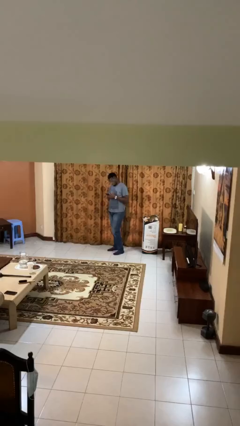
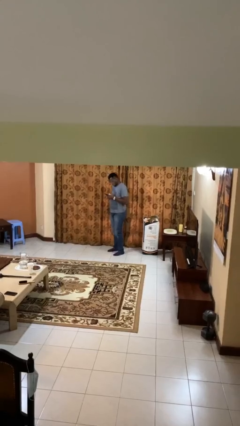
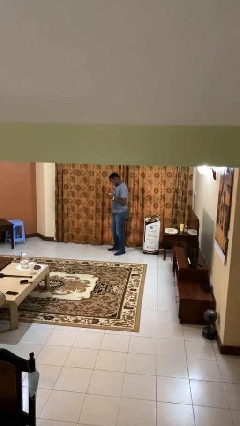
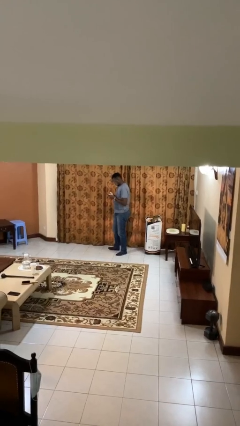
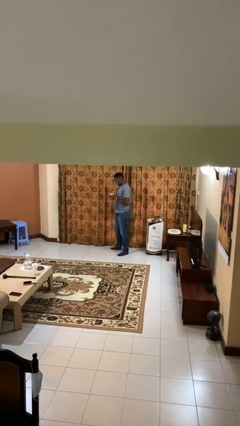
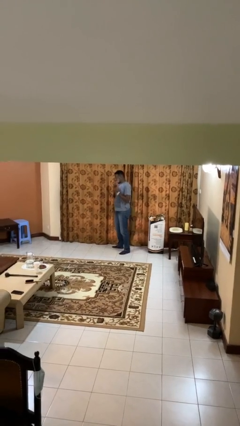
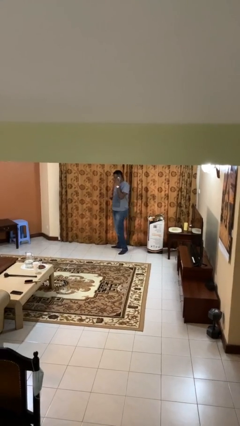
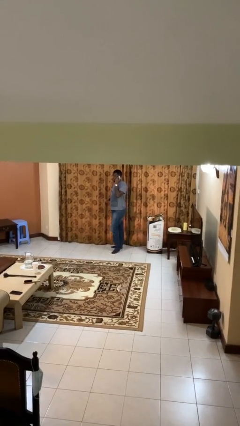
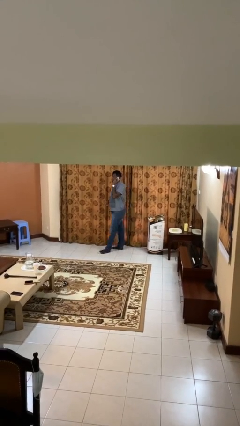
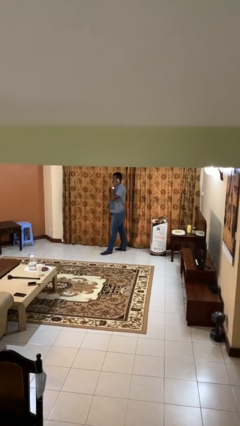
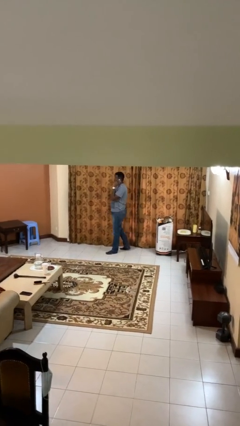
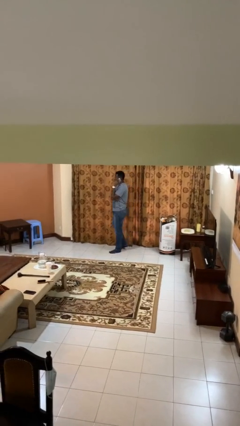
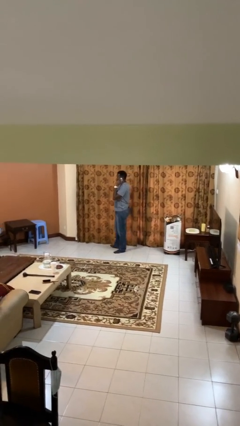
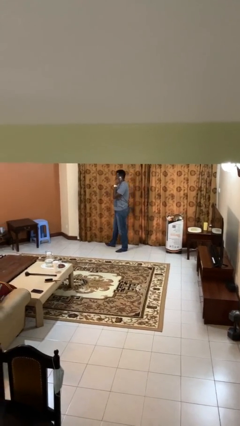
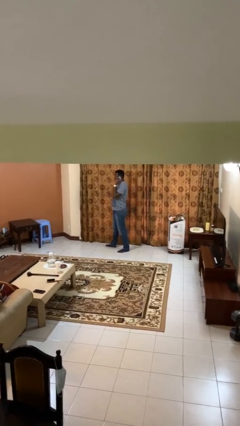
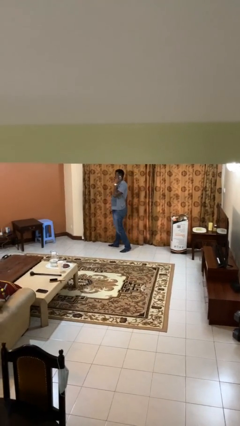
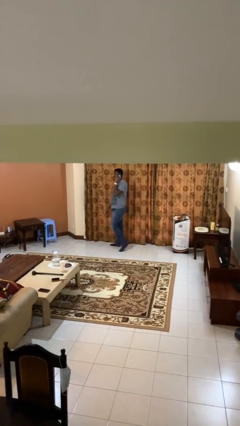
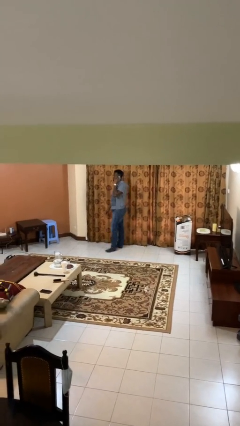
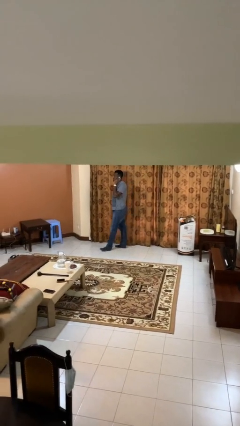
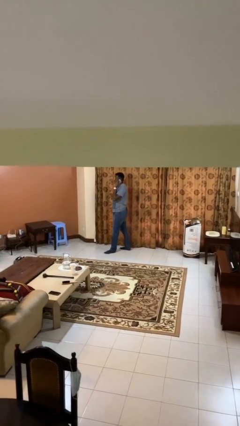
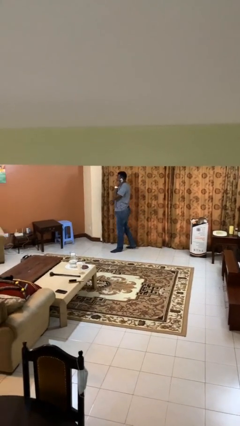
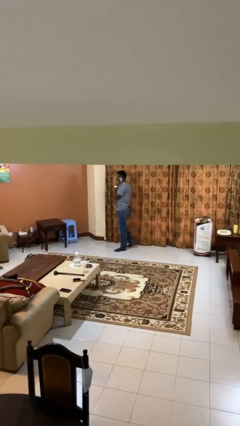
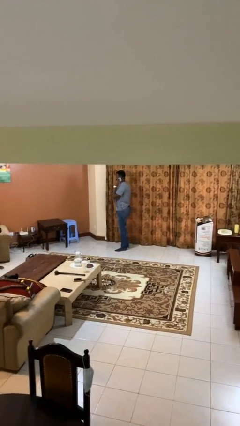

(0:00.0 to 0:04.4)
person talks on phone

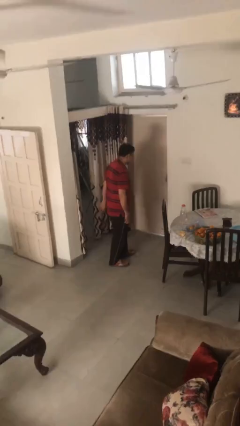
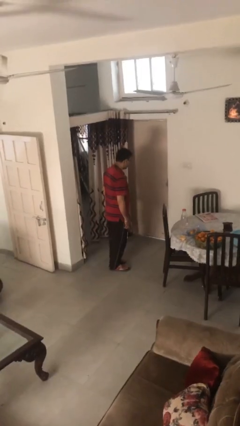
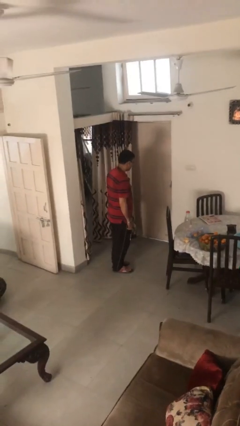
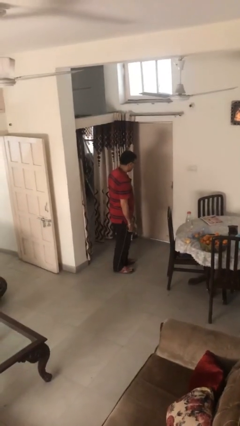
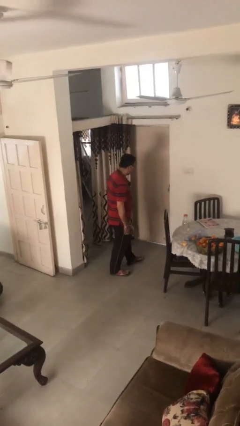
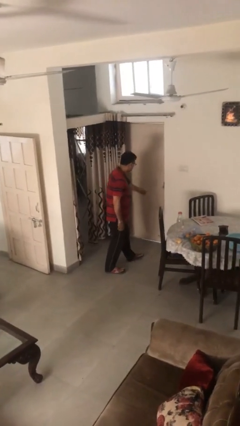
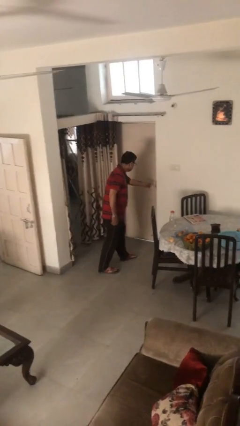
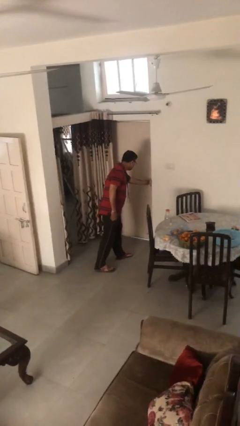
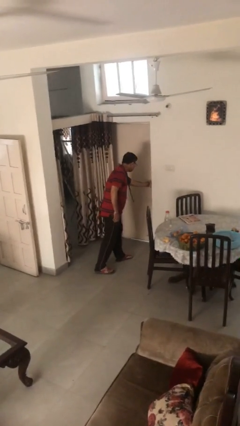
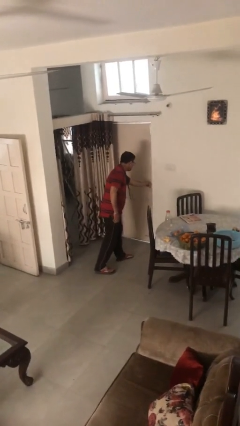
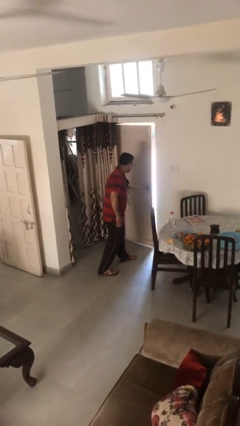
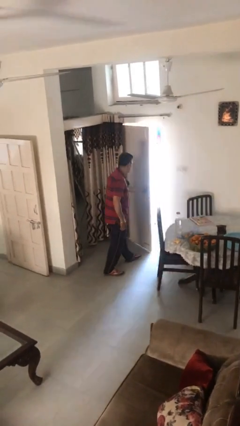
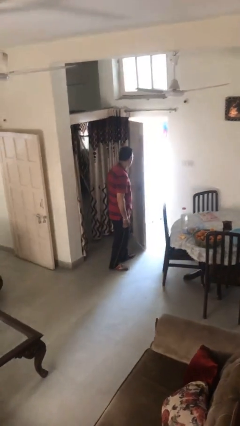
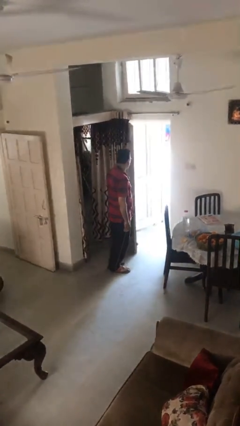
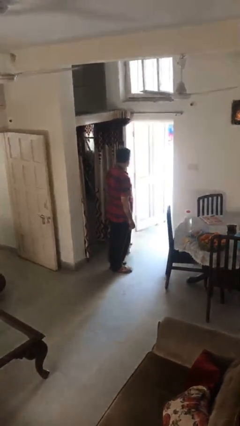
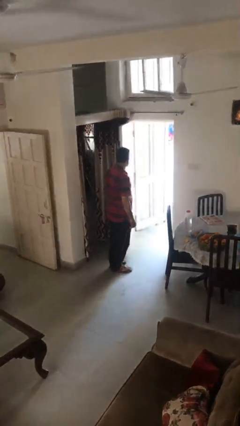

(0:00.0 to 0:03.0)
person opens facility door

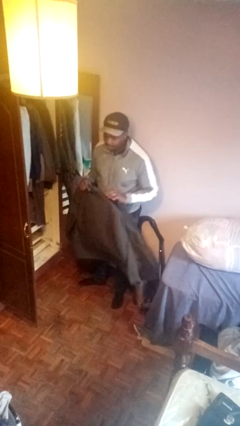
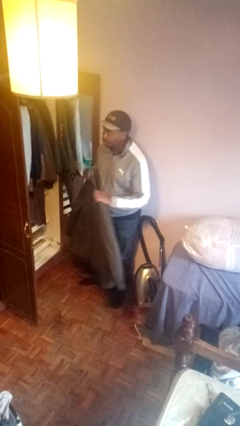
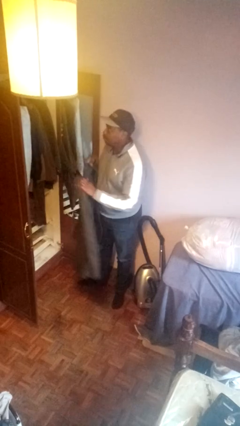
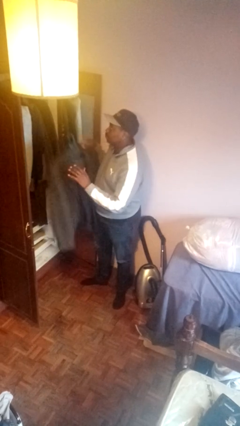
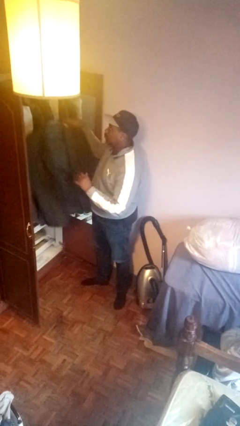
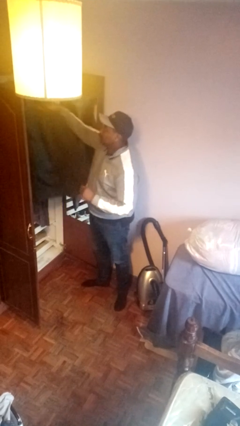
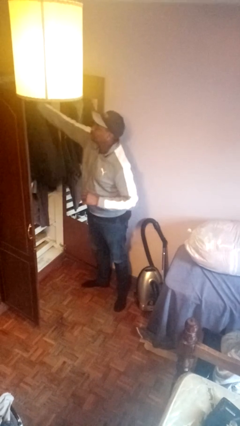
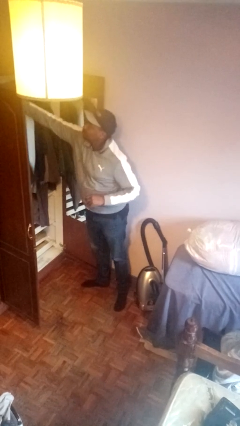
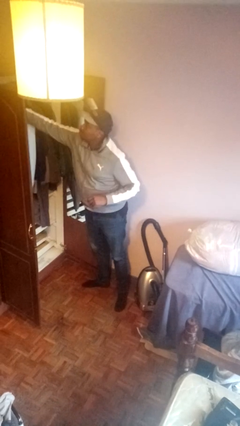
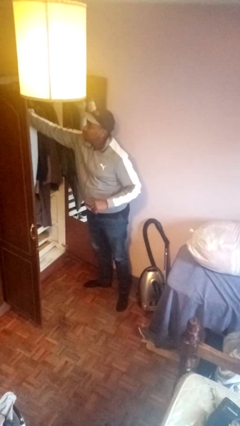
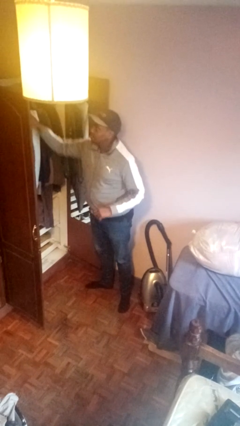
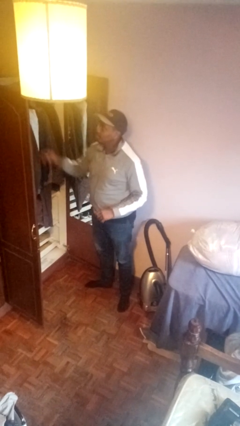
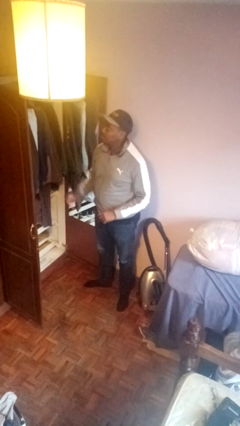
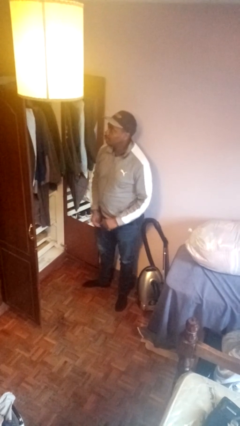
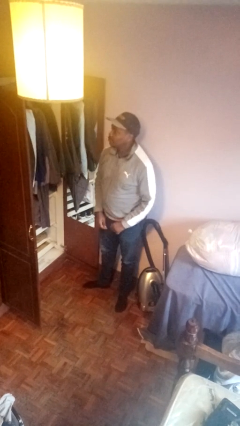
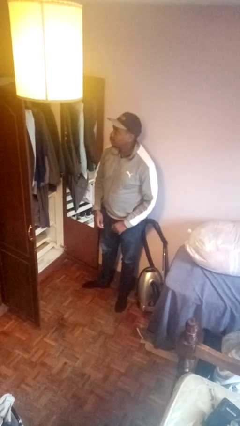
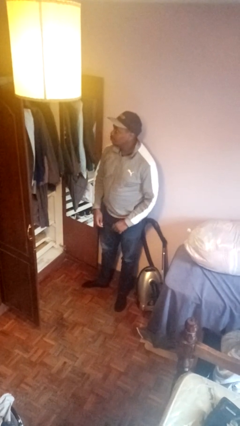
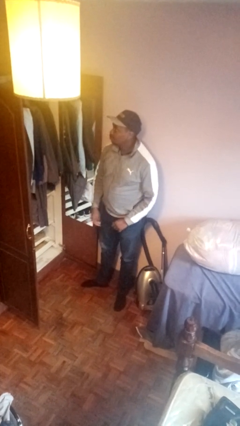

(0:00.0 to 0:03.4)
person puts clothes into closet

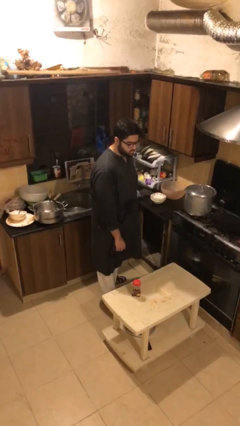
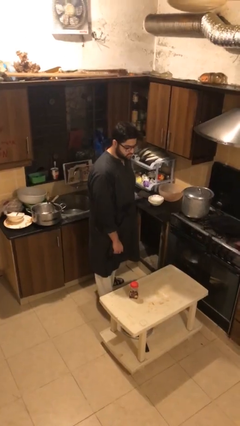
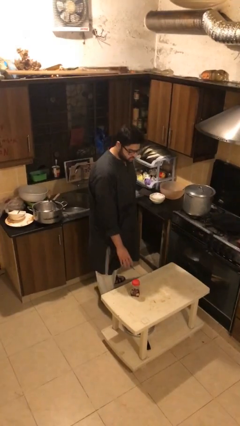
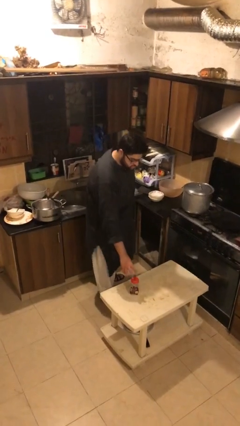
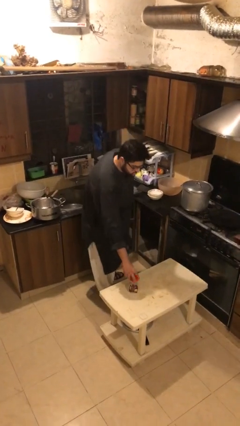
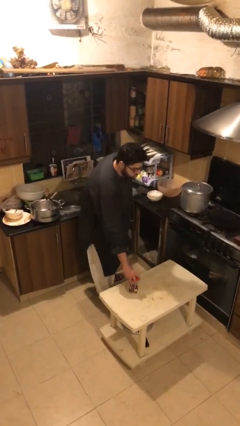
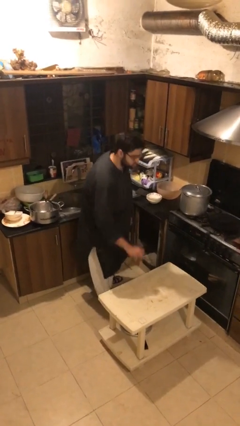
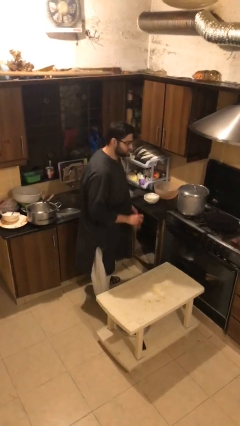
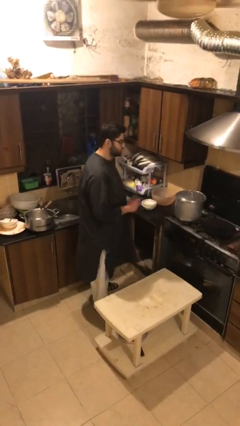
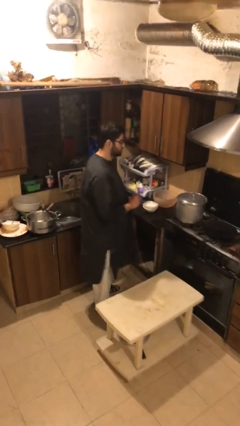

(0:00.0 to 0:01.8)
person picks up object from table

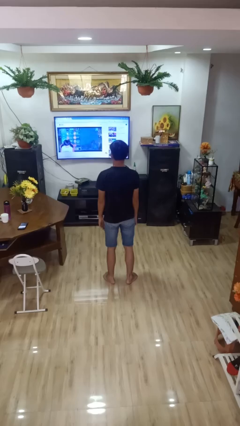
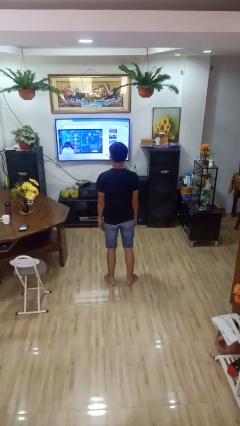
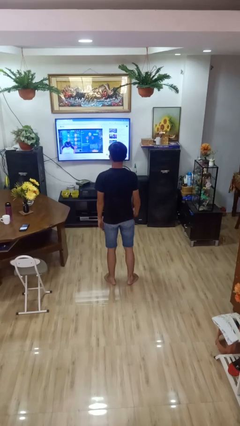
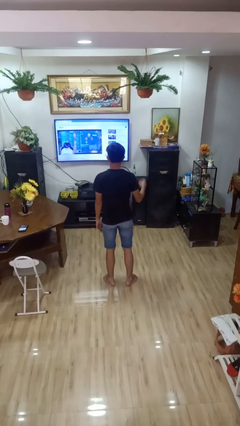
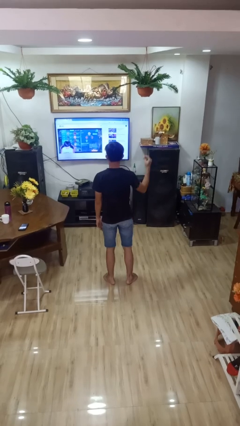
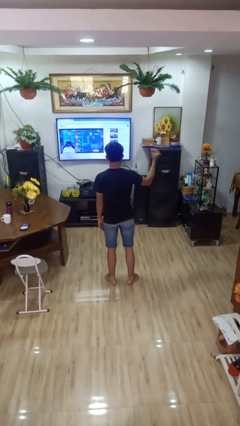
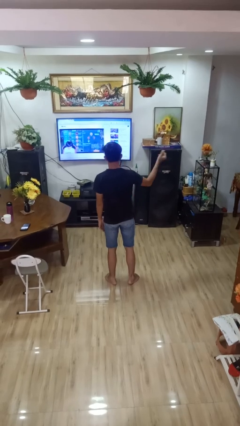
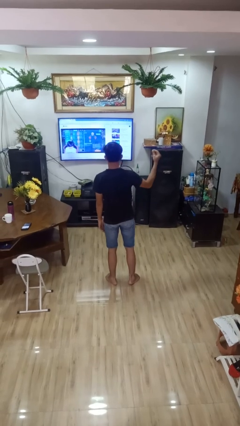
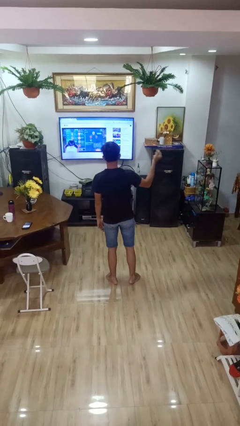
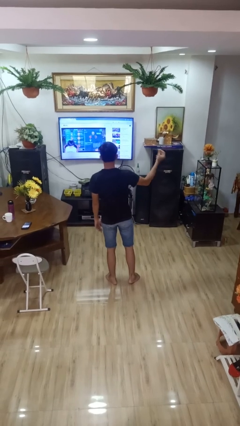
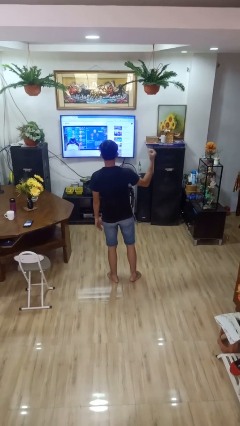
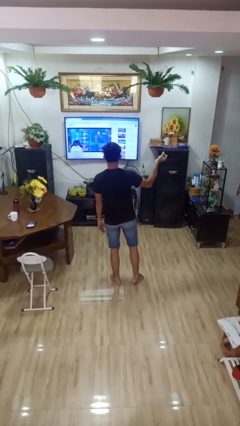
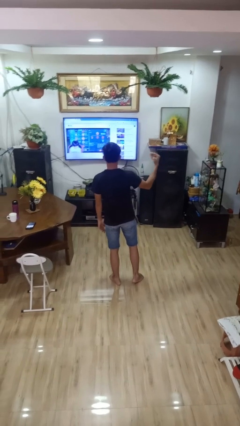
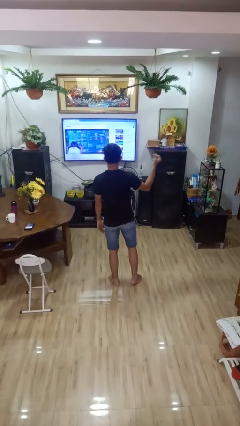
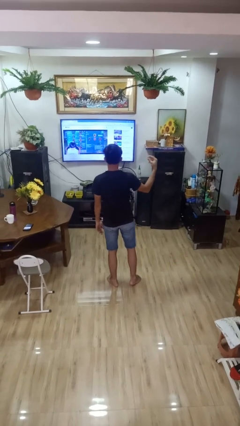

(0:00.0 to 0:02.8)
person snaps fingers

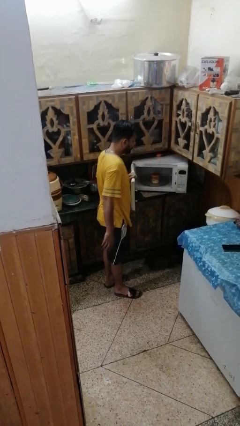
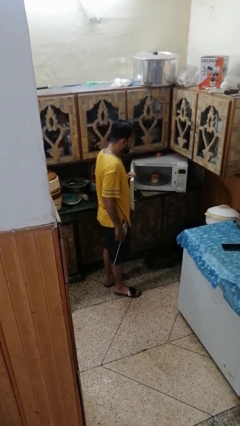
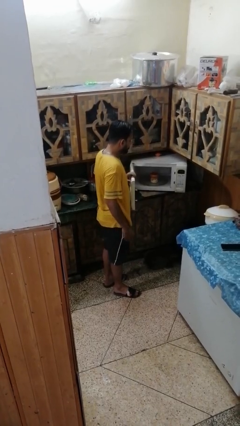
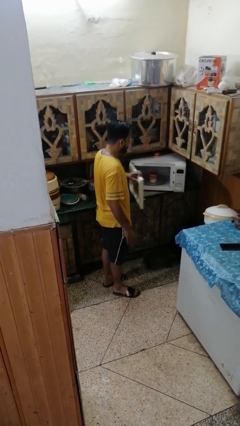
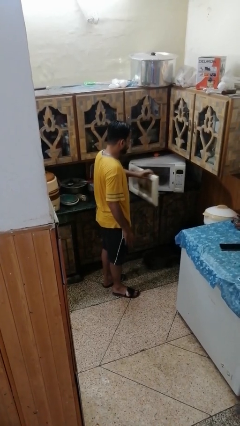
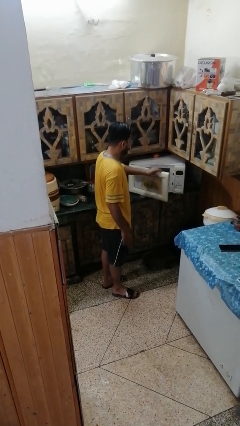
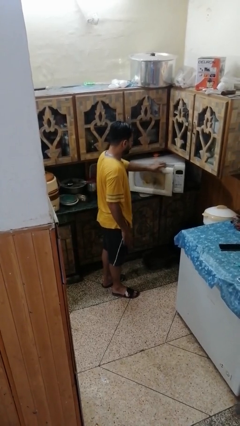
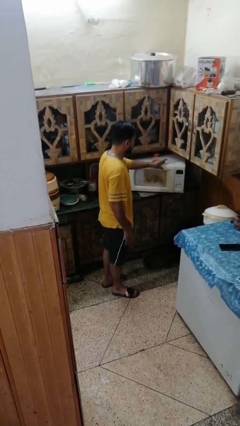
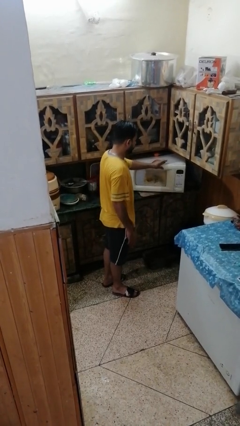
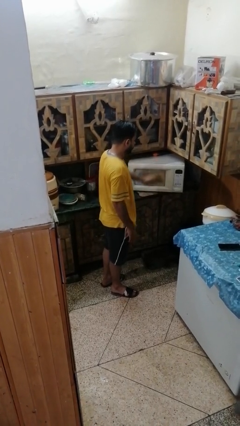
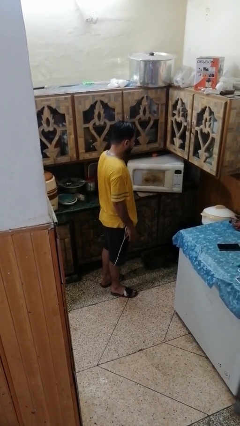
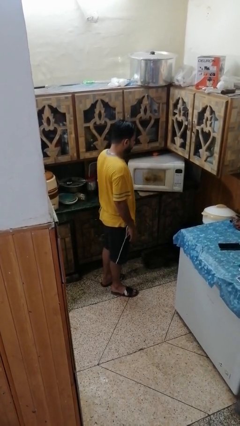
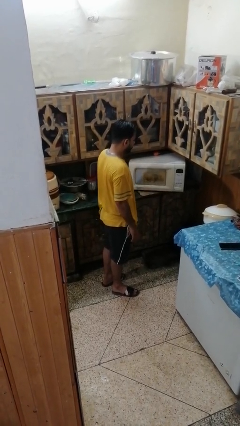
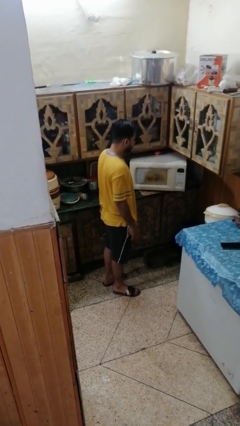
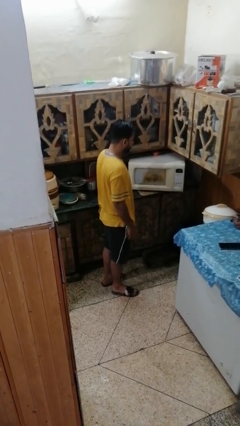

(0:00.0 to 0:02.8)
person closes refrigerator
